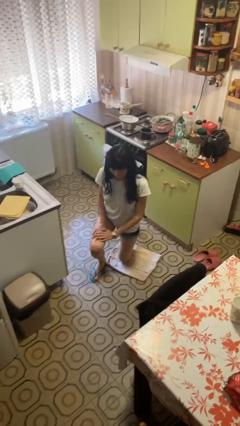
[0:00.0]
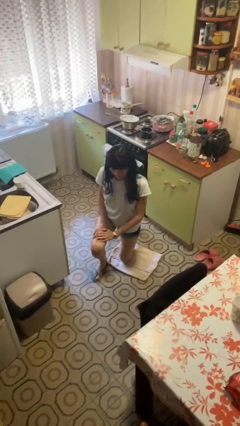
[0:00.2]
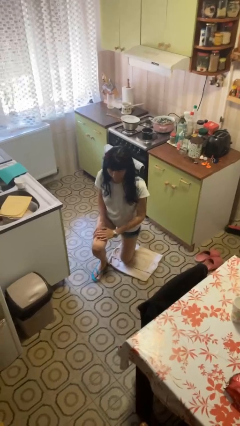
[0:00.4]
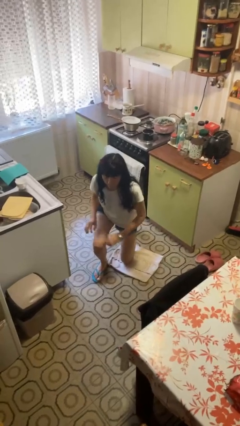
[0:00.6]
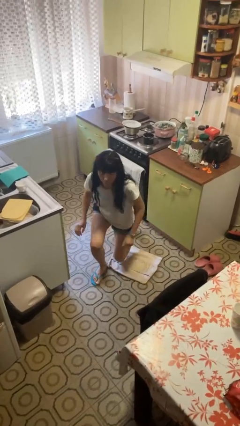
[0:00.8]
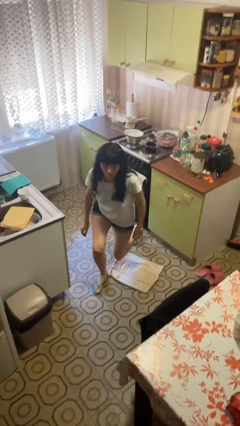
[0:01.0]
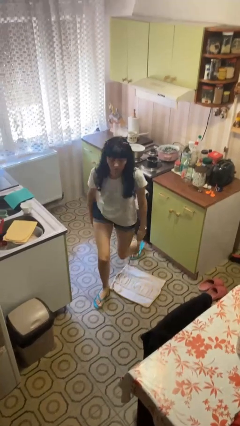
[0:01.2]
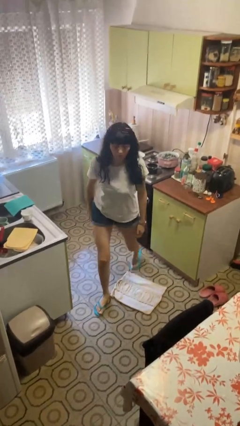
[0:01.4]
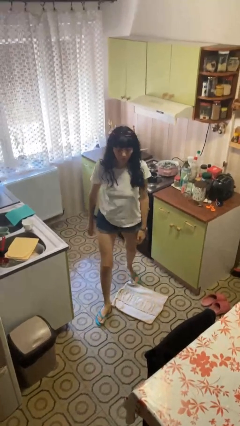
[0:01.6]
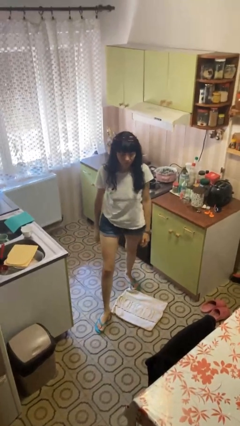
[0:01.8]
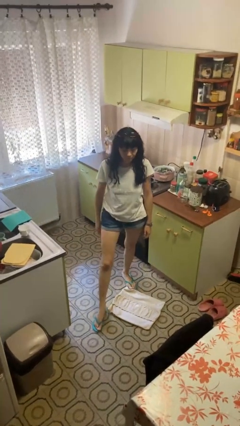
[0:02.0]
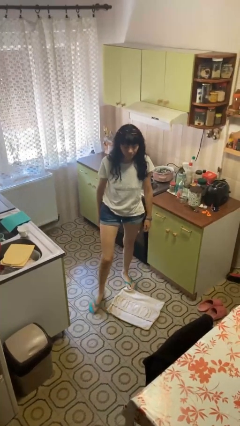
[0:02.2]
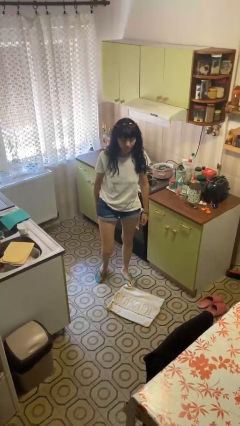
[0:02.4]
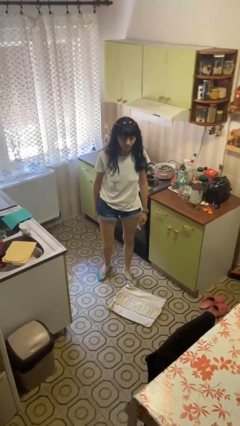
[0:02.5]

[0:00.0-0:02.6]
person stands up from floor

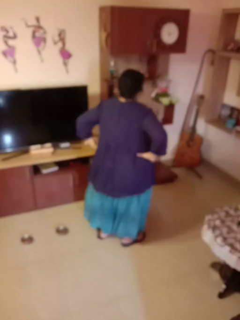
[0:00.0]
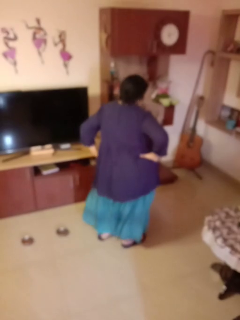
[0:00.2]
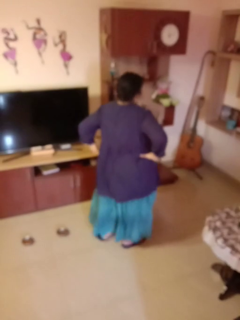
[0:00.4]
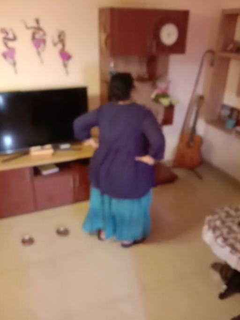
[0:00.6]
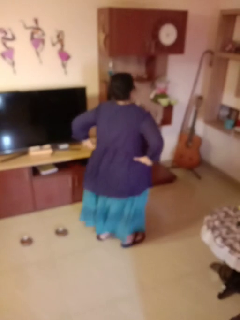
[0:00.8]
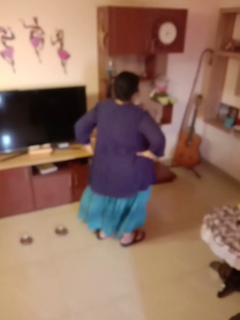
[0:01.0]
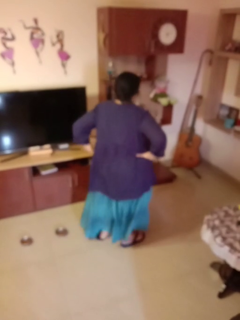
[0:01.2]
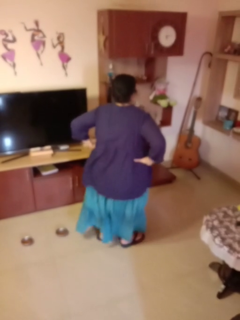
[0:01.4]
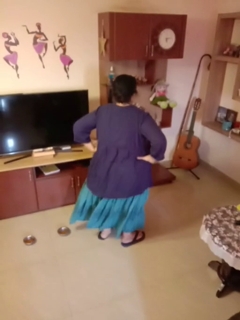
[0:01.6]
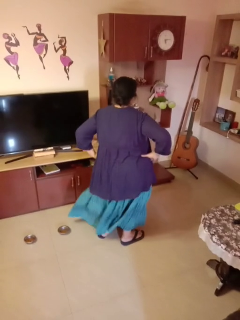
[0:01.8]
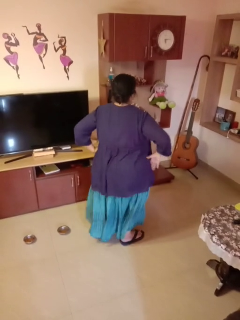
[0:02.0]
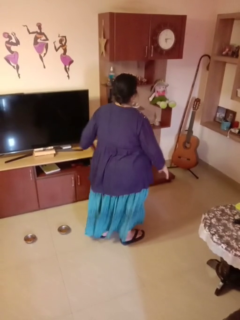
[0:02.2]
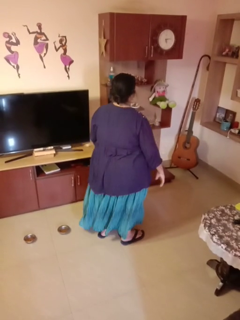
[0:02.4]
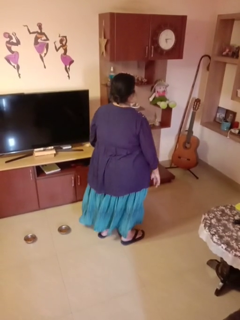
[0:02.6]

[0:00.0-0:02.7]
person wiggles hips

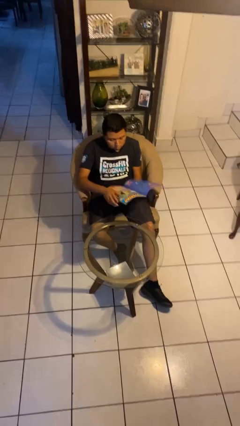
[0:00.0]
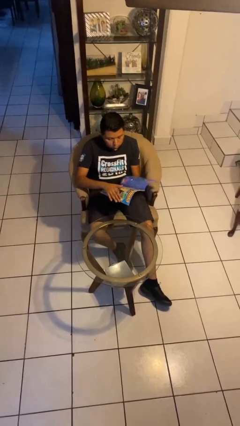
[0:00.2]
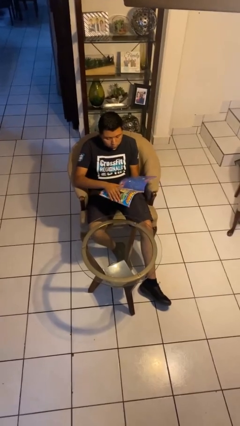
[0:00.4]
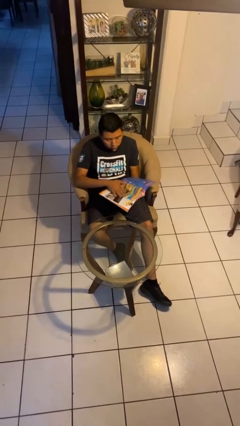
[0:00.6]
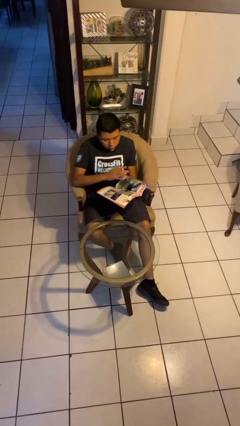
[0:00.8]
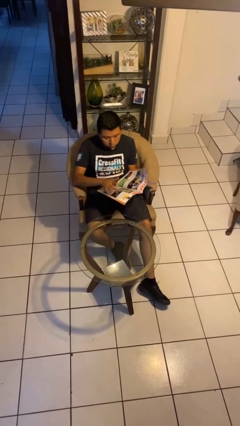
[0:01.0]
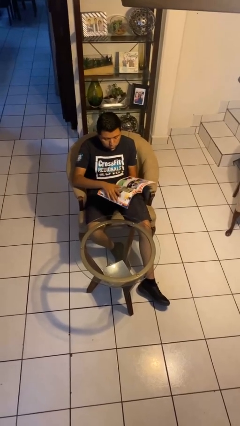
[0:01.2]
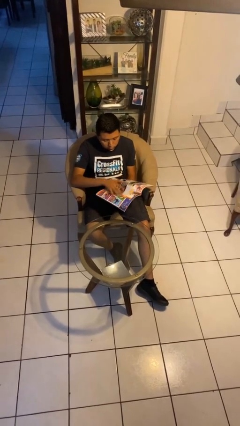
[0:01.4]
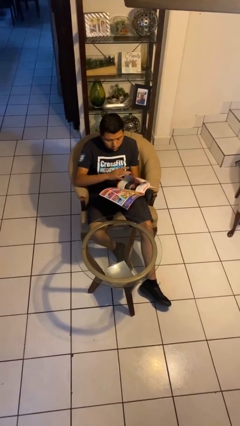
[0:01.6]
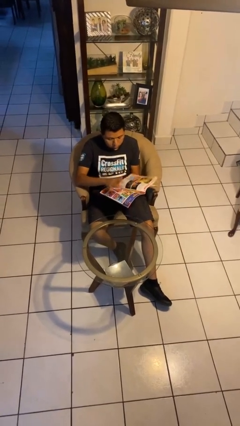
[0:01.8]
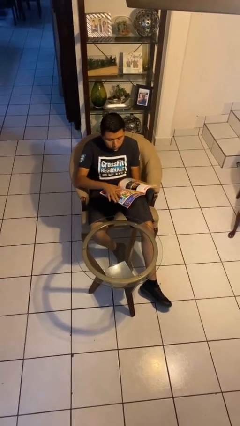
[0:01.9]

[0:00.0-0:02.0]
person reads magazine

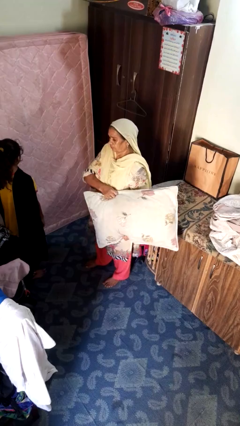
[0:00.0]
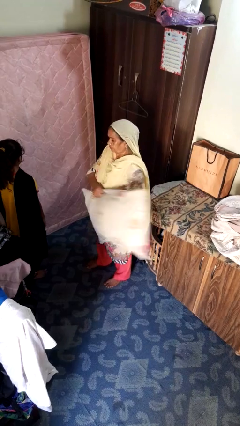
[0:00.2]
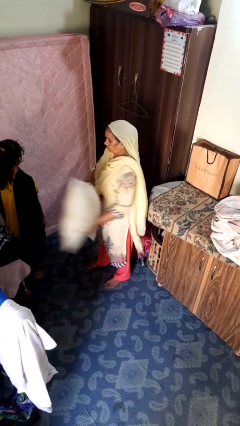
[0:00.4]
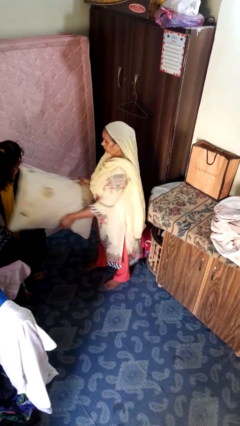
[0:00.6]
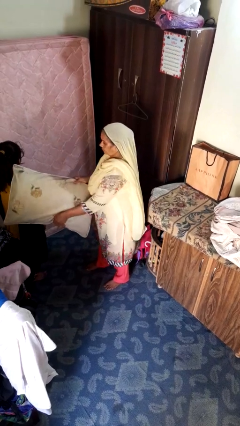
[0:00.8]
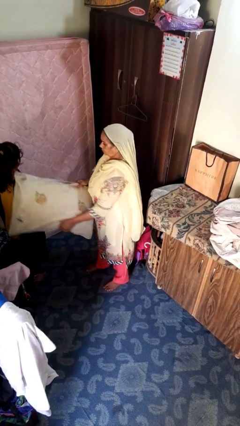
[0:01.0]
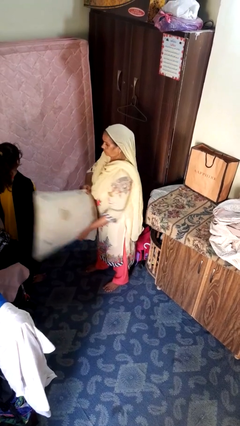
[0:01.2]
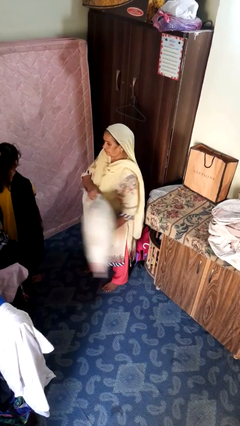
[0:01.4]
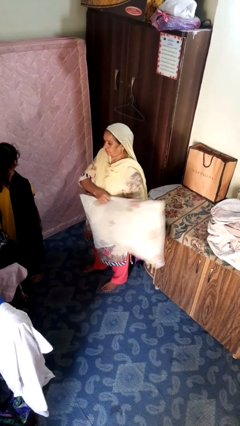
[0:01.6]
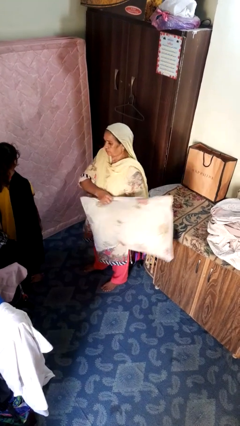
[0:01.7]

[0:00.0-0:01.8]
person hits person with pillow

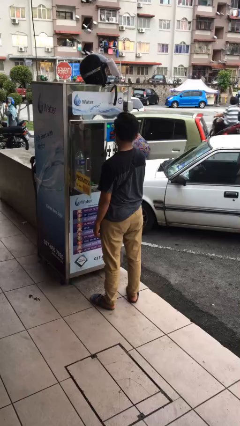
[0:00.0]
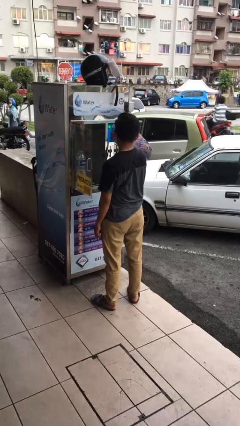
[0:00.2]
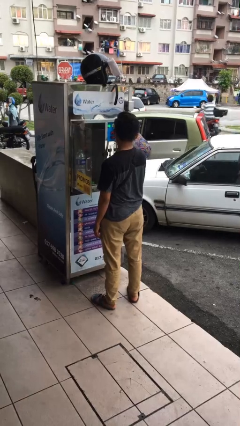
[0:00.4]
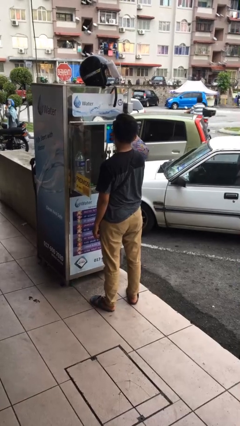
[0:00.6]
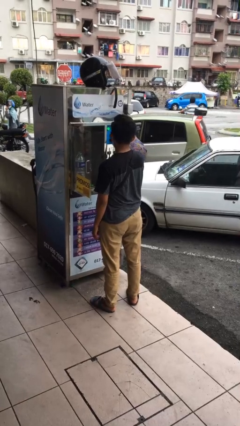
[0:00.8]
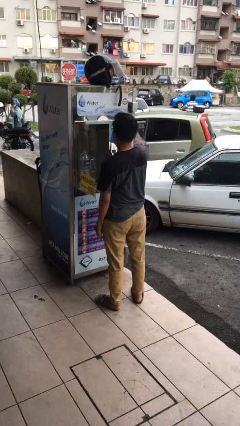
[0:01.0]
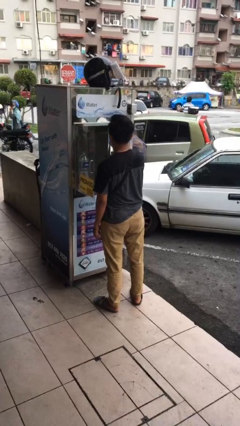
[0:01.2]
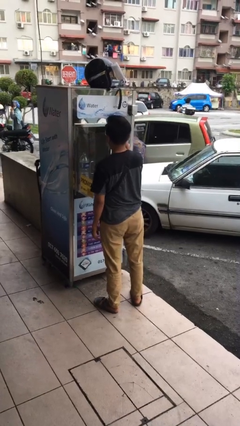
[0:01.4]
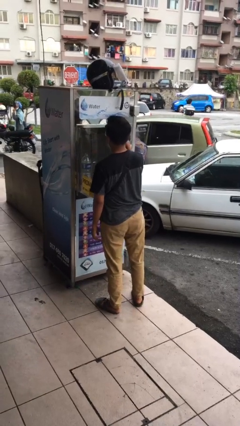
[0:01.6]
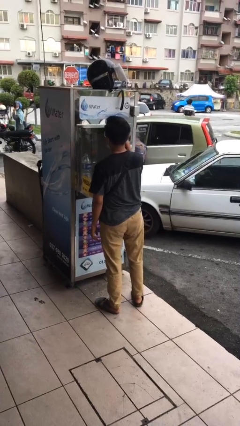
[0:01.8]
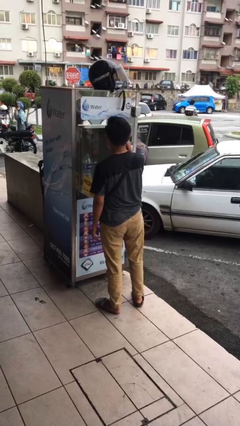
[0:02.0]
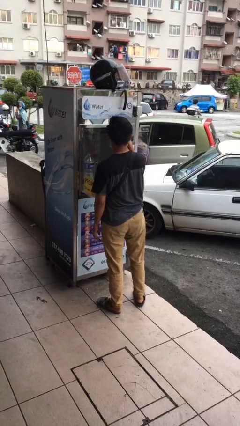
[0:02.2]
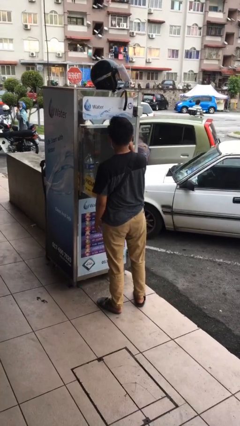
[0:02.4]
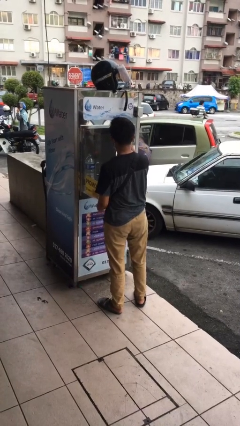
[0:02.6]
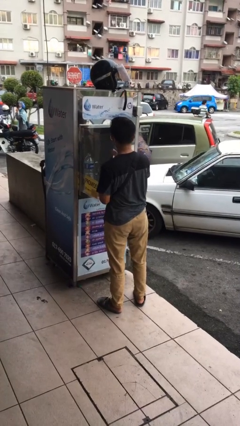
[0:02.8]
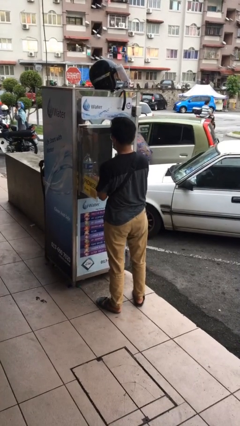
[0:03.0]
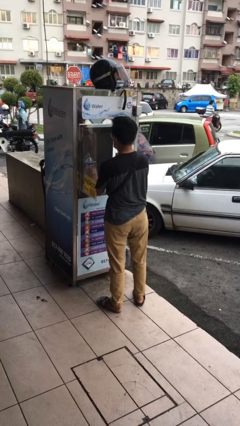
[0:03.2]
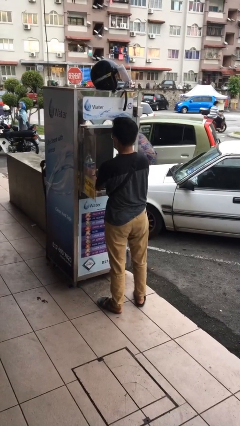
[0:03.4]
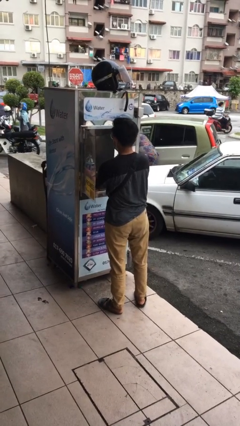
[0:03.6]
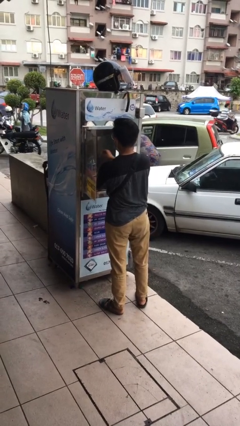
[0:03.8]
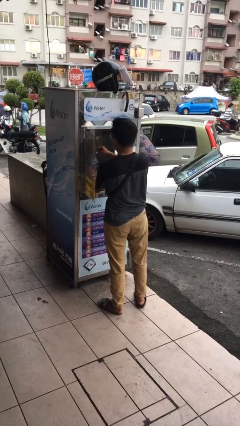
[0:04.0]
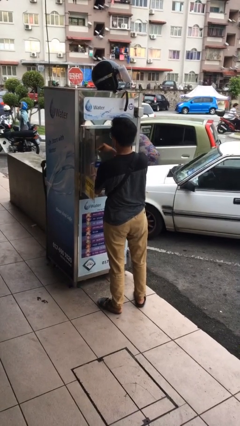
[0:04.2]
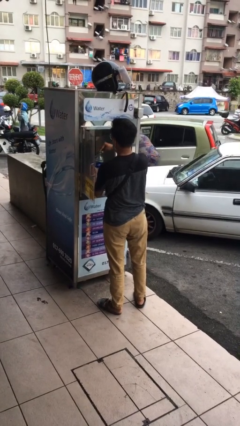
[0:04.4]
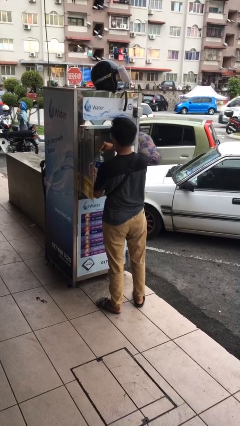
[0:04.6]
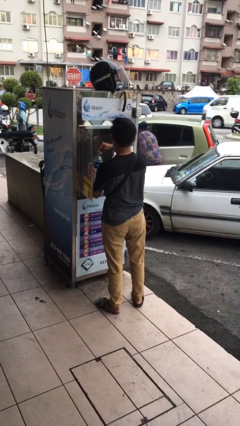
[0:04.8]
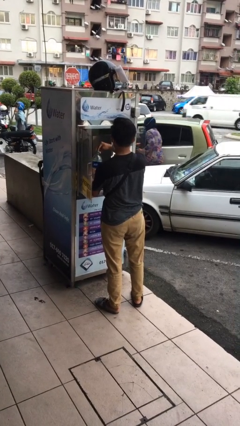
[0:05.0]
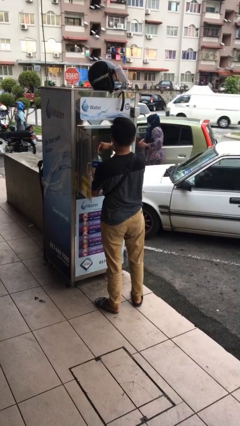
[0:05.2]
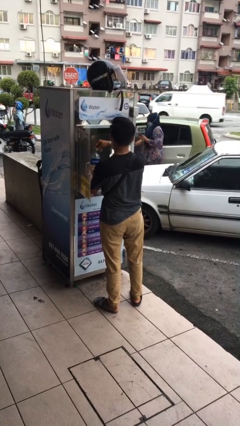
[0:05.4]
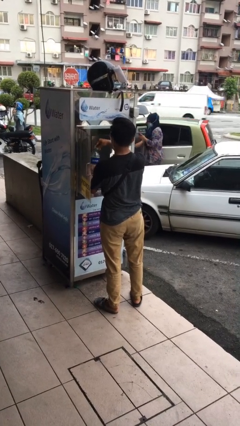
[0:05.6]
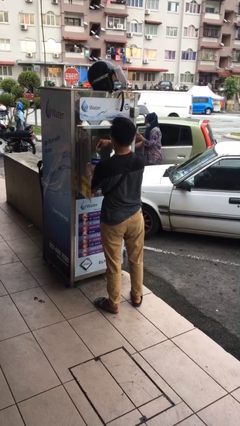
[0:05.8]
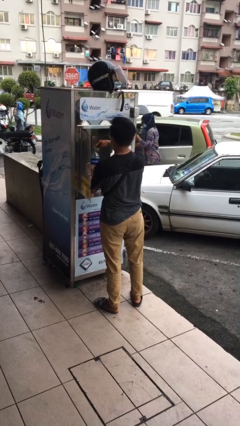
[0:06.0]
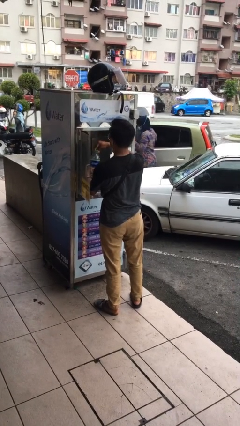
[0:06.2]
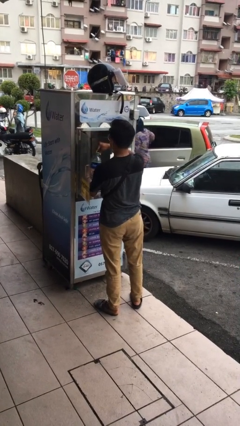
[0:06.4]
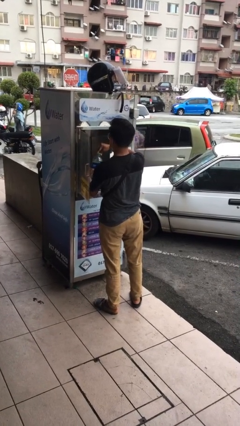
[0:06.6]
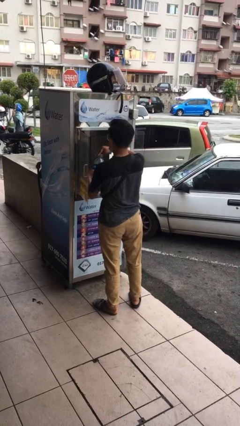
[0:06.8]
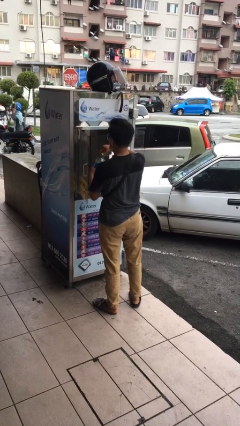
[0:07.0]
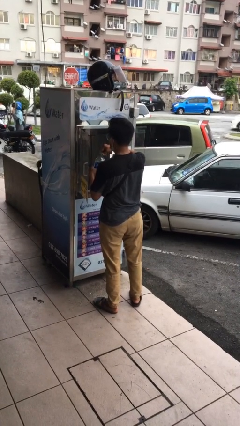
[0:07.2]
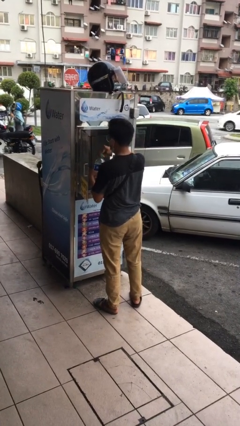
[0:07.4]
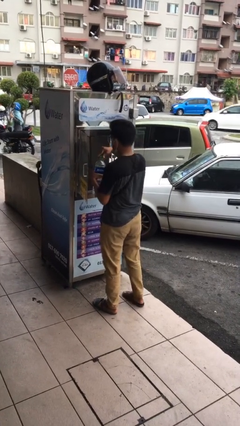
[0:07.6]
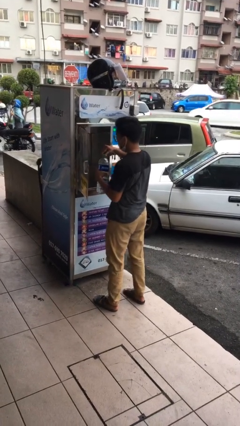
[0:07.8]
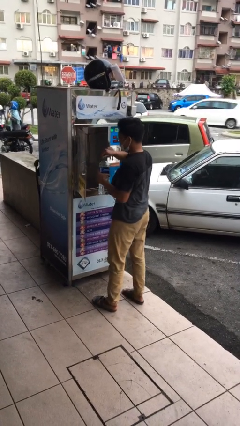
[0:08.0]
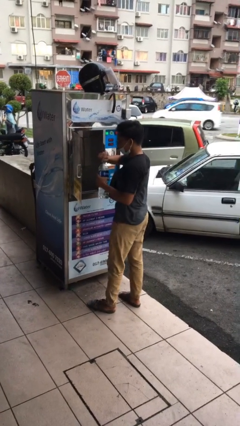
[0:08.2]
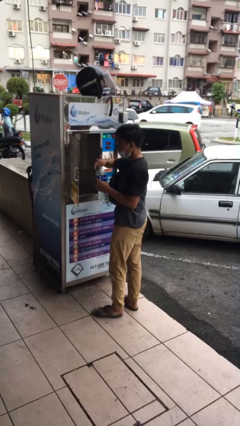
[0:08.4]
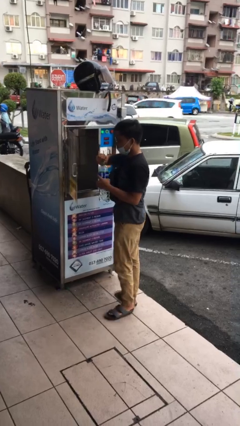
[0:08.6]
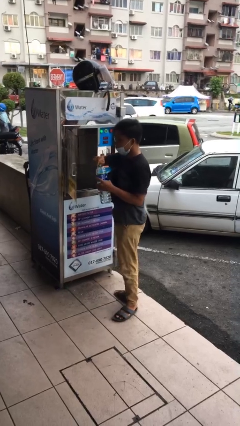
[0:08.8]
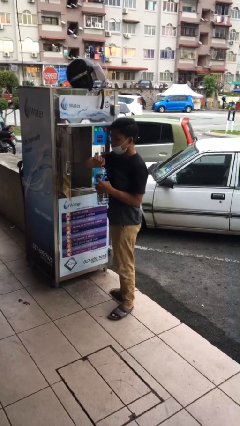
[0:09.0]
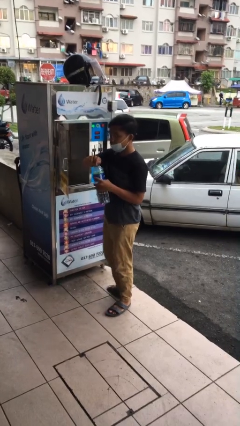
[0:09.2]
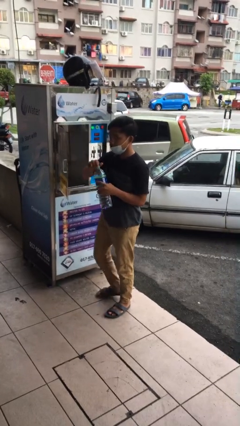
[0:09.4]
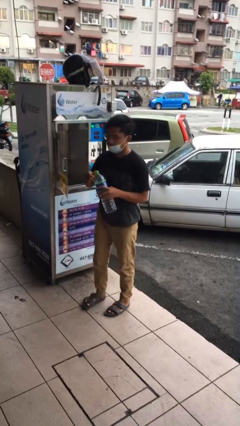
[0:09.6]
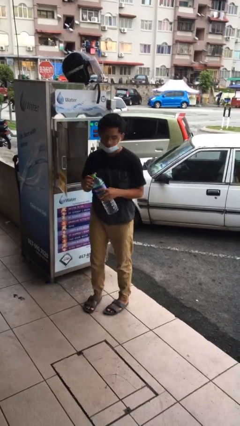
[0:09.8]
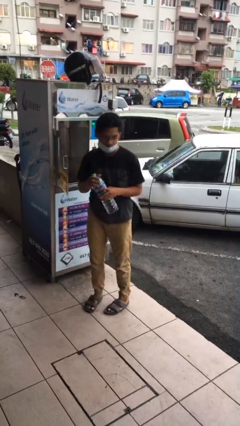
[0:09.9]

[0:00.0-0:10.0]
person purchases from machine
